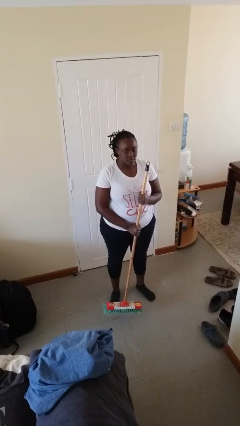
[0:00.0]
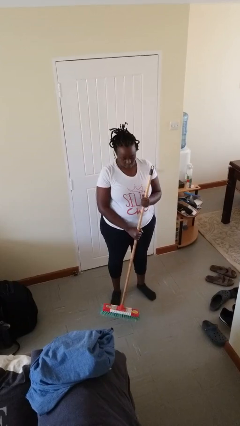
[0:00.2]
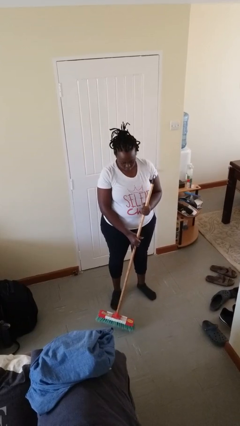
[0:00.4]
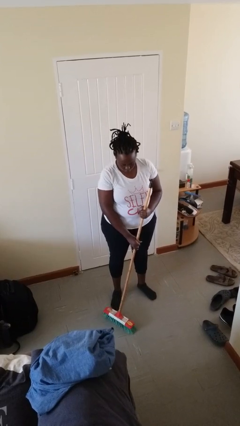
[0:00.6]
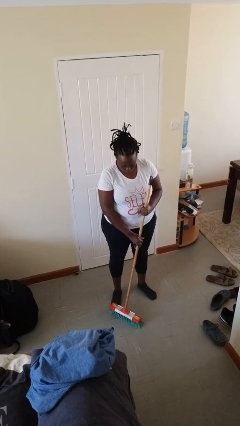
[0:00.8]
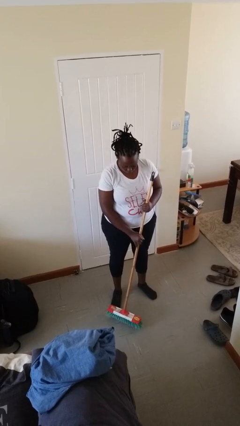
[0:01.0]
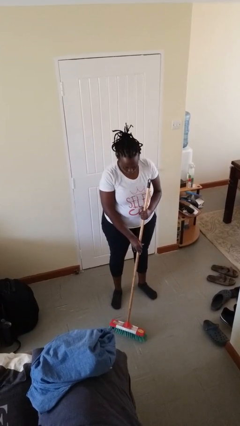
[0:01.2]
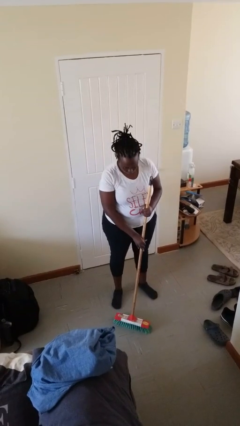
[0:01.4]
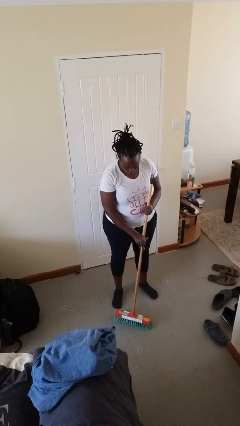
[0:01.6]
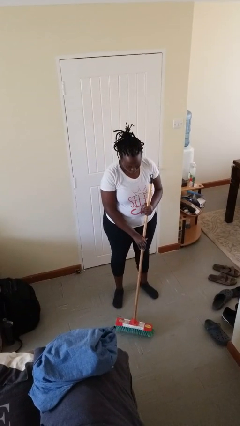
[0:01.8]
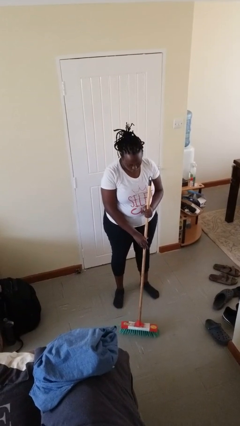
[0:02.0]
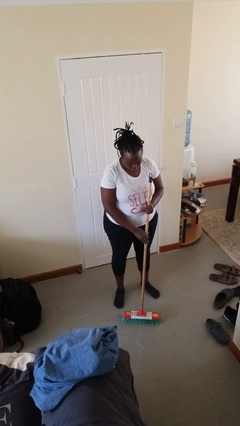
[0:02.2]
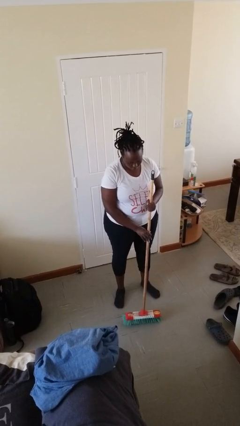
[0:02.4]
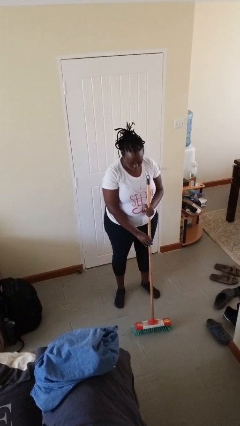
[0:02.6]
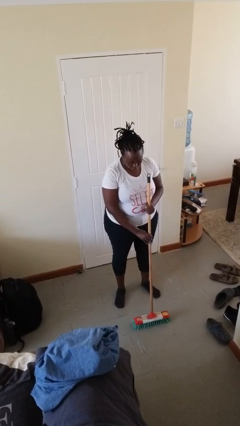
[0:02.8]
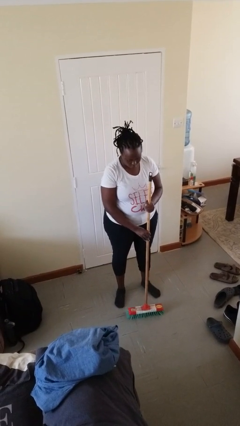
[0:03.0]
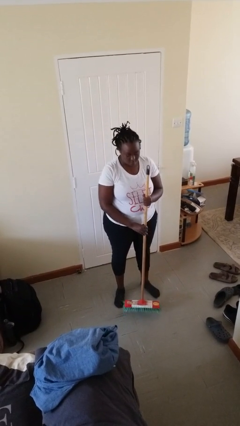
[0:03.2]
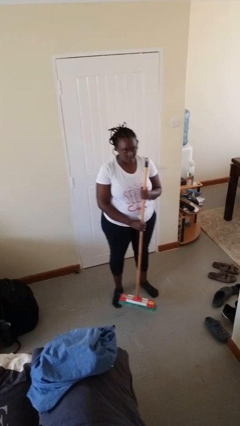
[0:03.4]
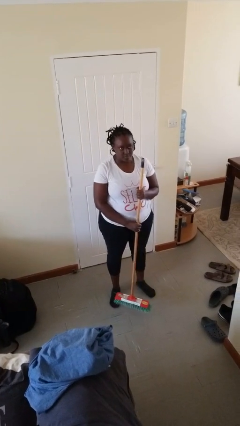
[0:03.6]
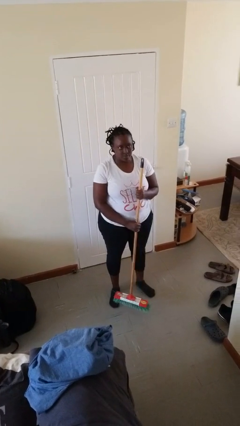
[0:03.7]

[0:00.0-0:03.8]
person sweeps floor

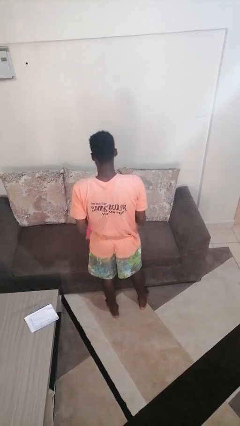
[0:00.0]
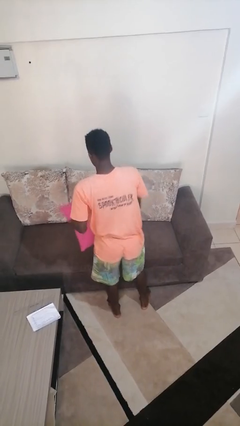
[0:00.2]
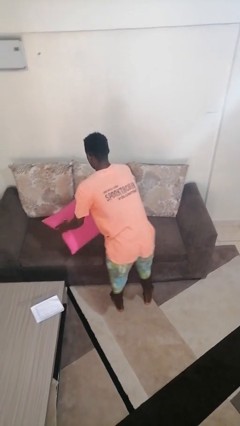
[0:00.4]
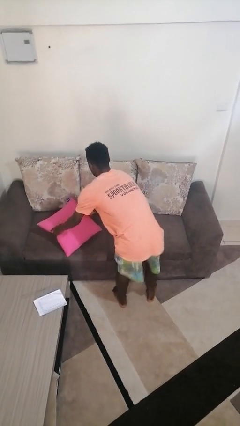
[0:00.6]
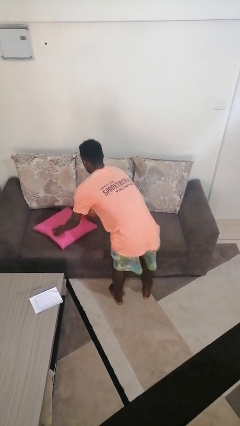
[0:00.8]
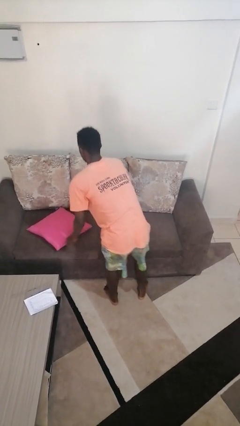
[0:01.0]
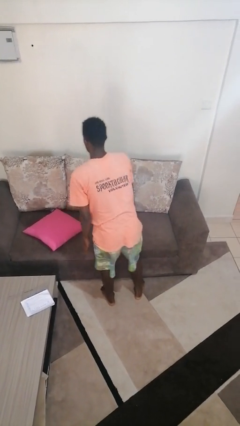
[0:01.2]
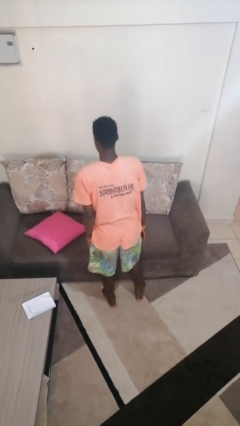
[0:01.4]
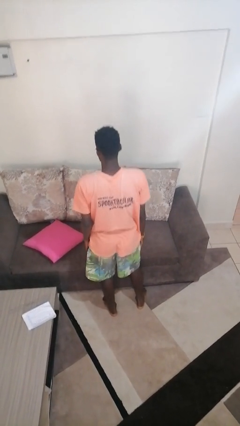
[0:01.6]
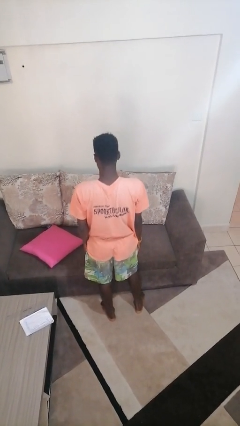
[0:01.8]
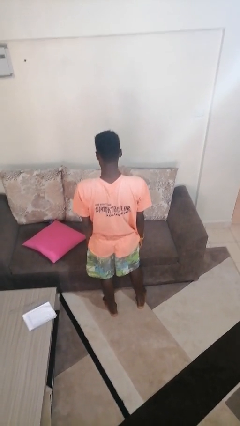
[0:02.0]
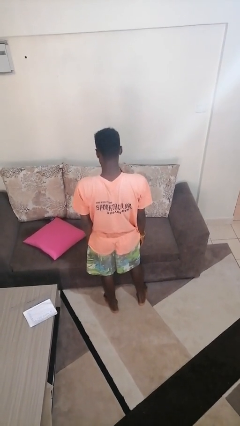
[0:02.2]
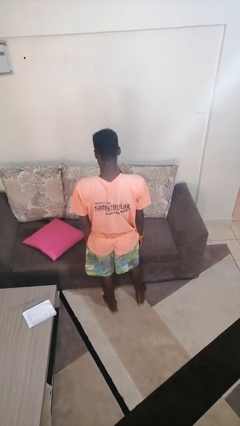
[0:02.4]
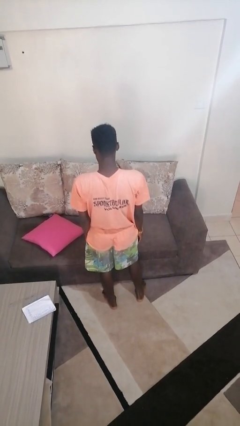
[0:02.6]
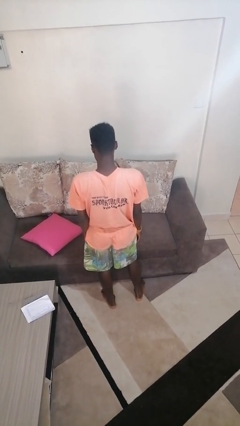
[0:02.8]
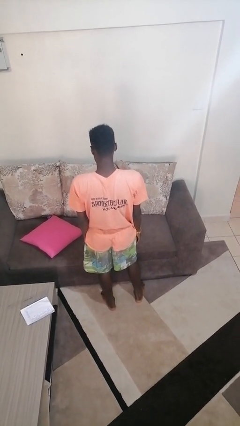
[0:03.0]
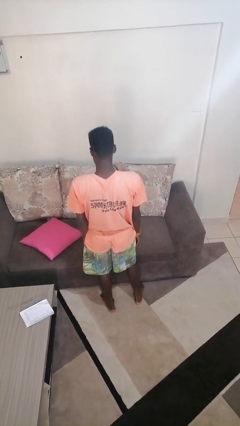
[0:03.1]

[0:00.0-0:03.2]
person puts down object on couch

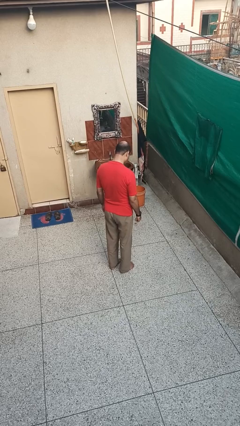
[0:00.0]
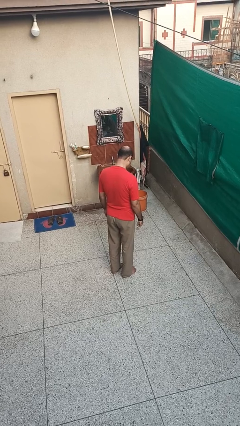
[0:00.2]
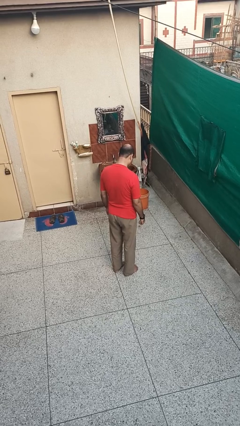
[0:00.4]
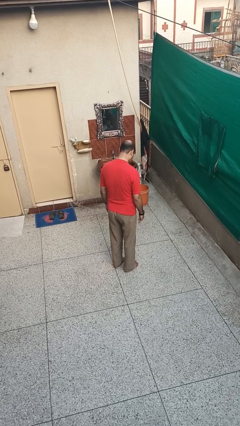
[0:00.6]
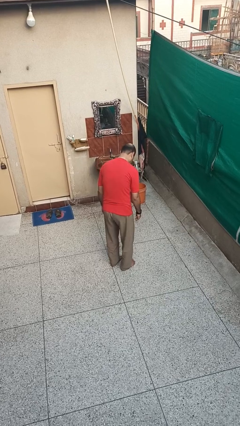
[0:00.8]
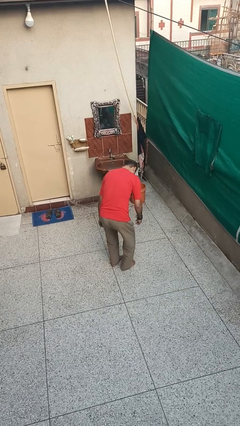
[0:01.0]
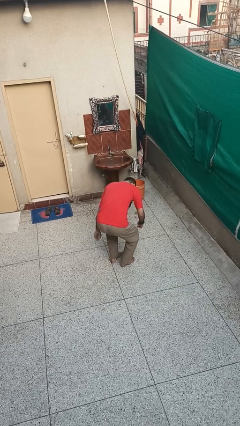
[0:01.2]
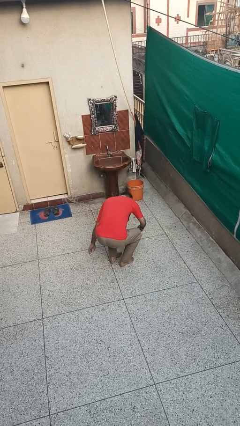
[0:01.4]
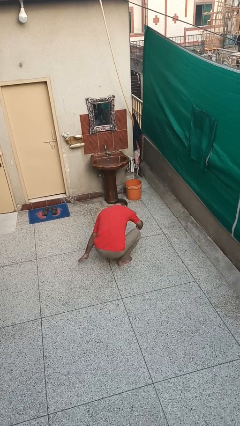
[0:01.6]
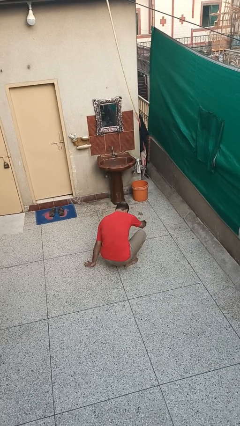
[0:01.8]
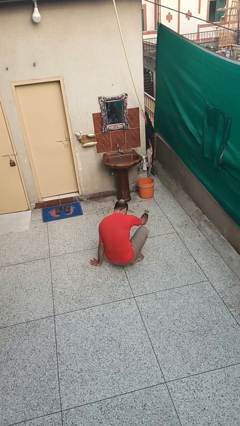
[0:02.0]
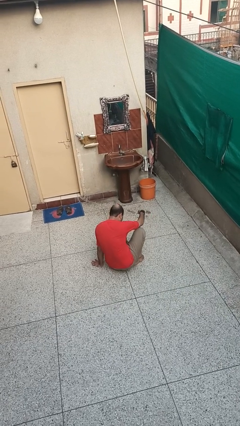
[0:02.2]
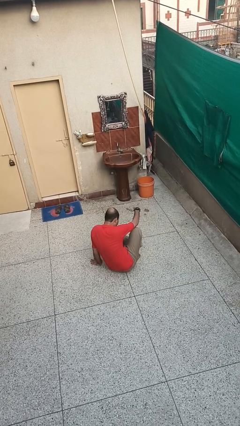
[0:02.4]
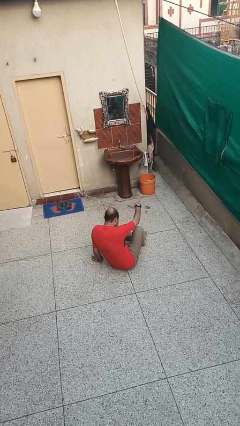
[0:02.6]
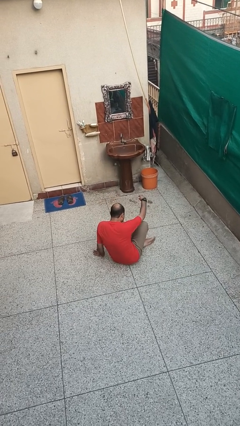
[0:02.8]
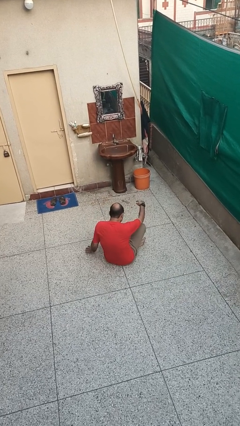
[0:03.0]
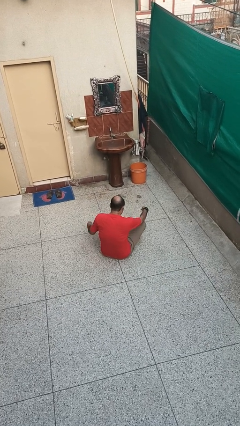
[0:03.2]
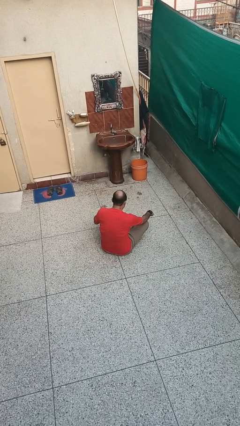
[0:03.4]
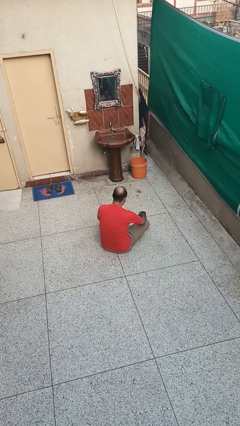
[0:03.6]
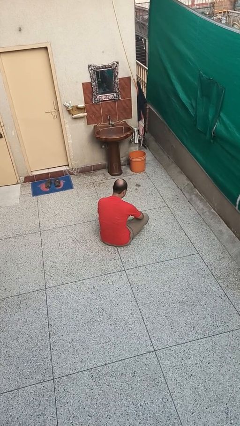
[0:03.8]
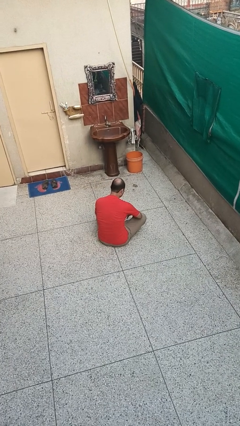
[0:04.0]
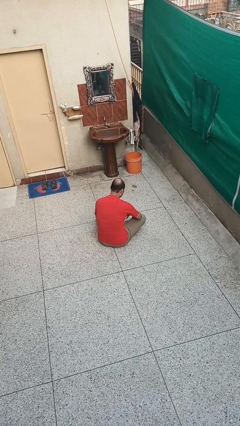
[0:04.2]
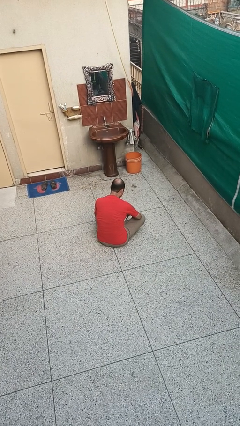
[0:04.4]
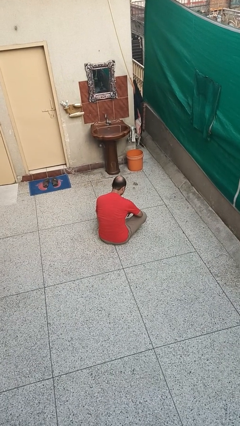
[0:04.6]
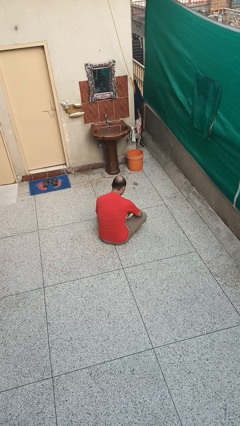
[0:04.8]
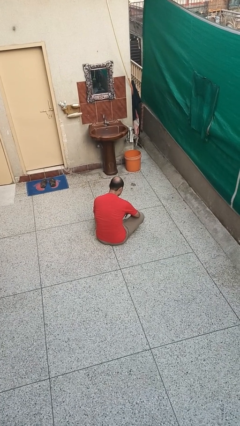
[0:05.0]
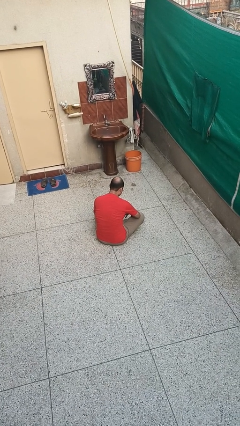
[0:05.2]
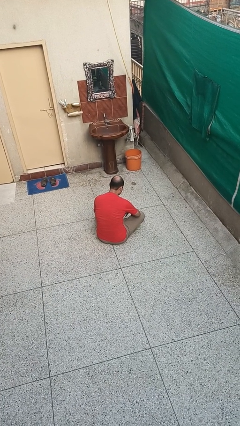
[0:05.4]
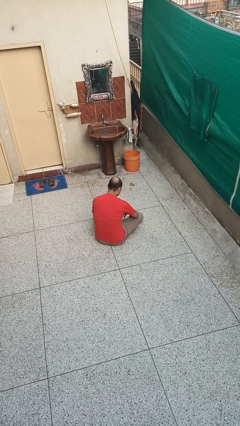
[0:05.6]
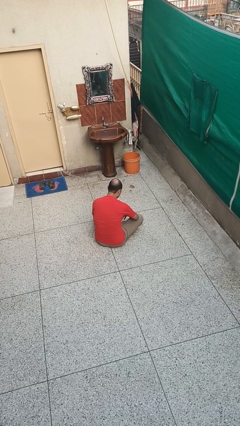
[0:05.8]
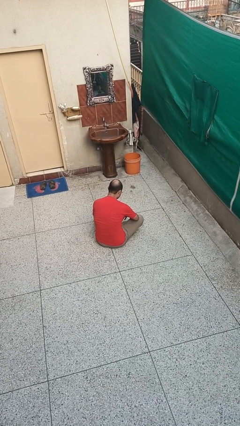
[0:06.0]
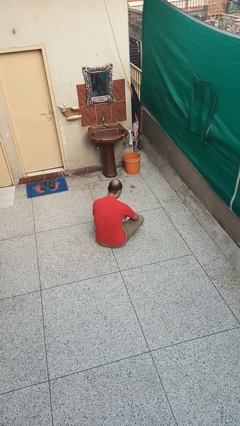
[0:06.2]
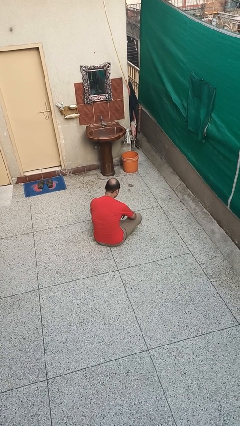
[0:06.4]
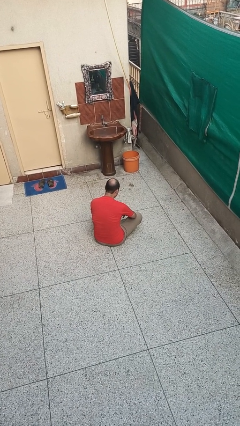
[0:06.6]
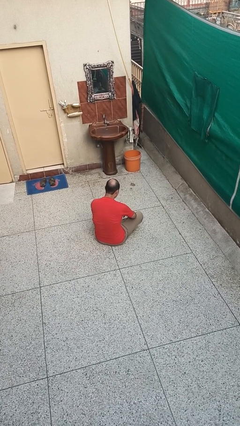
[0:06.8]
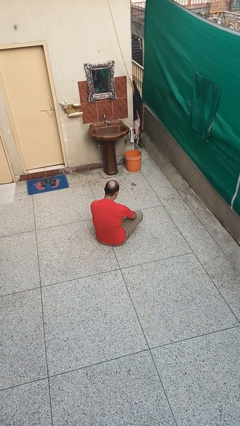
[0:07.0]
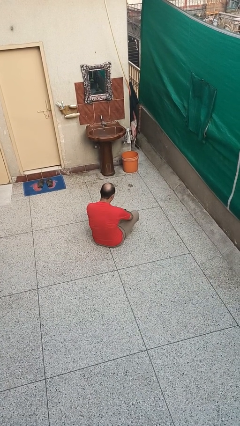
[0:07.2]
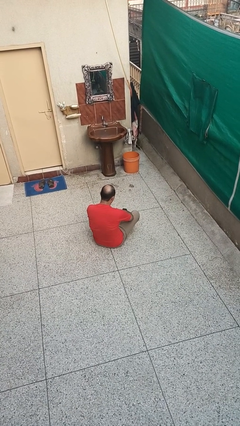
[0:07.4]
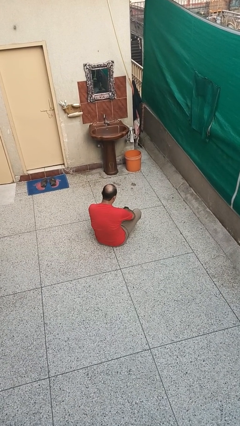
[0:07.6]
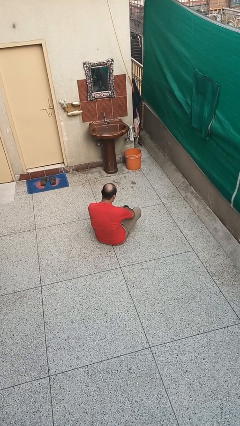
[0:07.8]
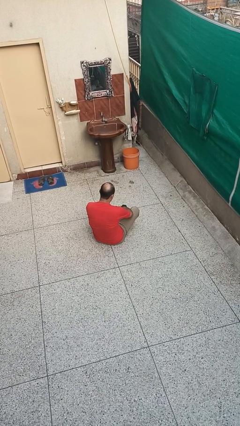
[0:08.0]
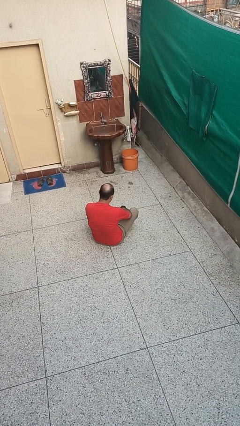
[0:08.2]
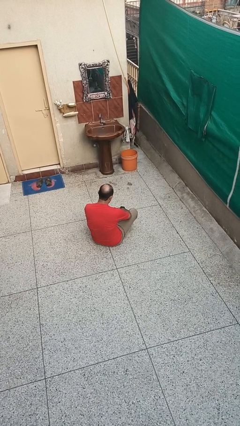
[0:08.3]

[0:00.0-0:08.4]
person sits crisscross

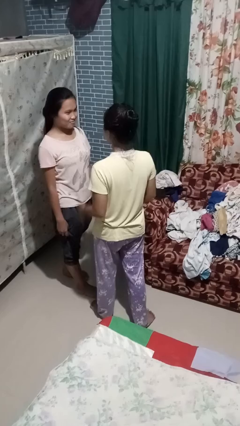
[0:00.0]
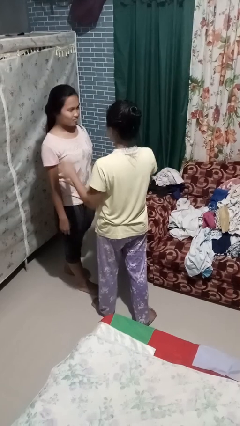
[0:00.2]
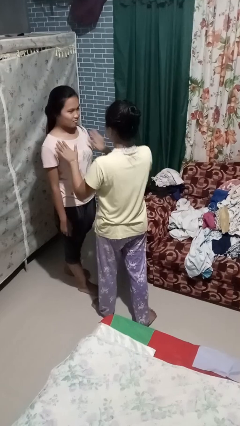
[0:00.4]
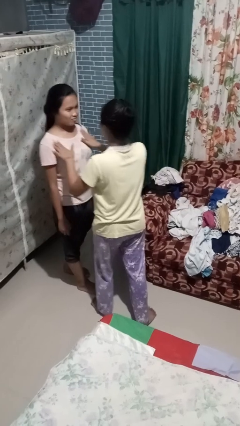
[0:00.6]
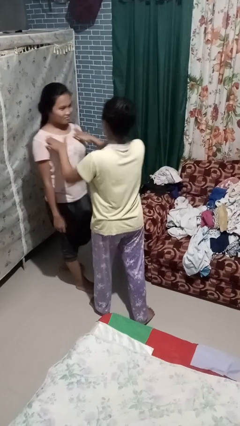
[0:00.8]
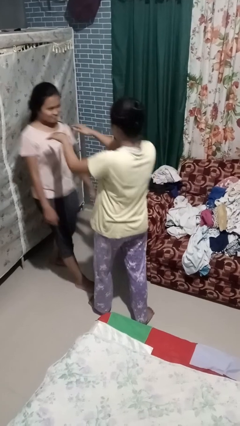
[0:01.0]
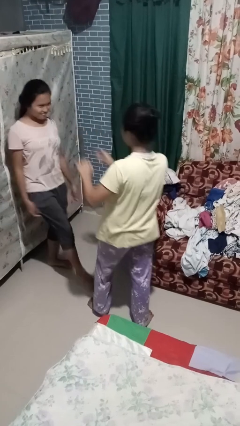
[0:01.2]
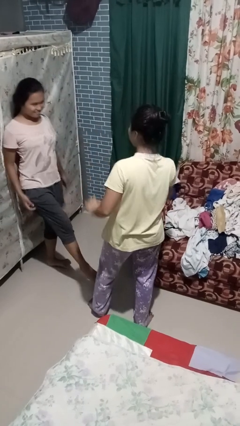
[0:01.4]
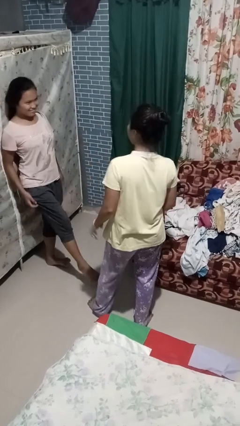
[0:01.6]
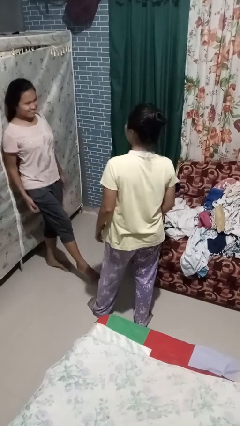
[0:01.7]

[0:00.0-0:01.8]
person shoves person

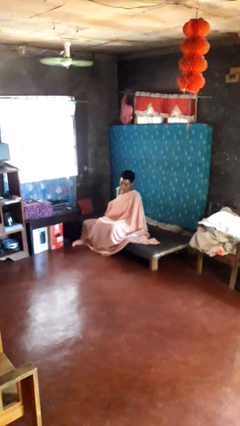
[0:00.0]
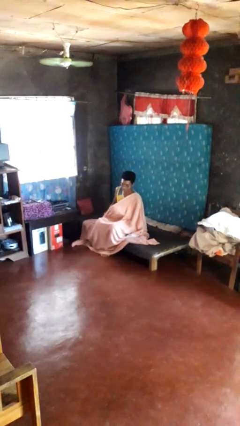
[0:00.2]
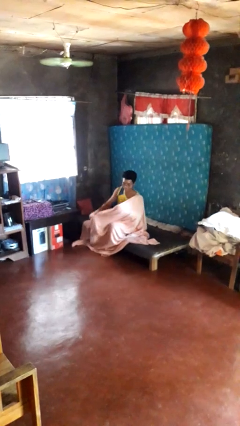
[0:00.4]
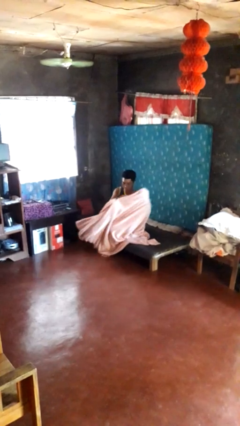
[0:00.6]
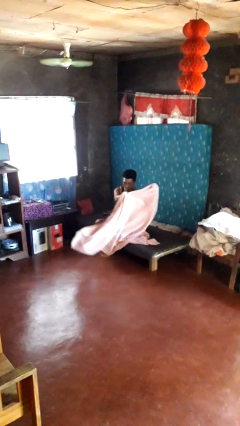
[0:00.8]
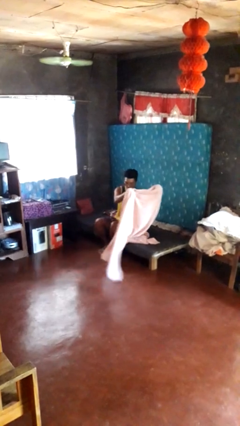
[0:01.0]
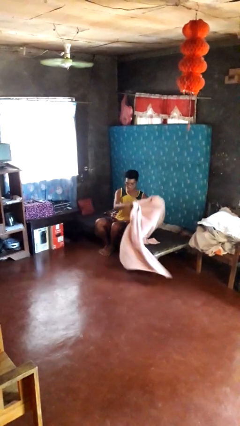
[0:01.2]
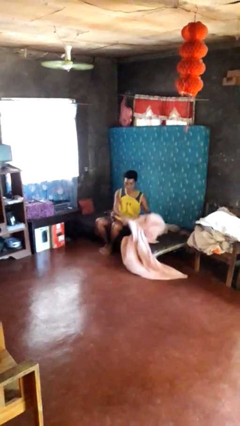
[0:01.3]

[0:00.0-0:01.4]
person uncovers with blanket
